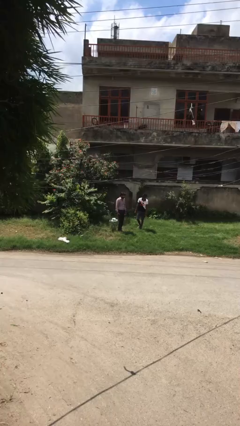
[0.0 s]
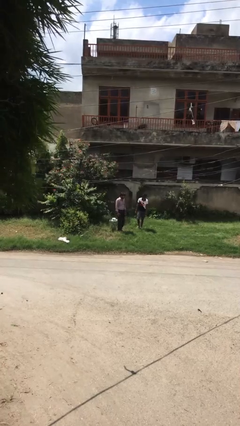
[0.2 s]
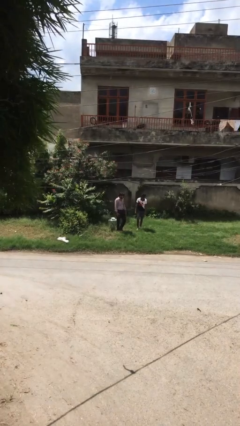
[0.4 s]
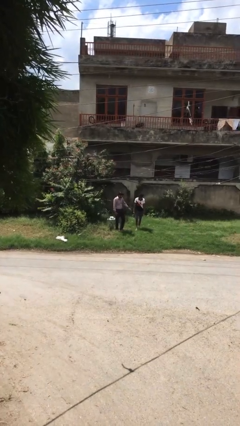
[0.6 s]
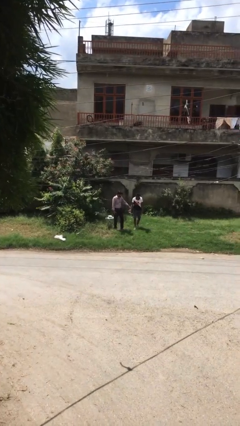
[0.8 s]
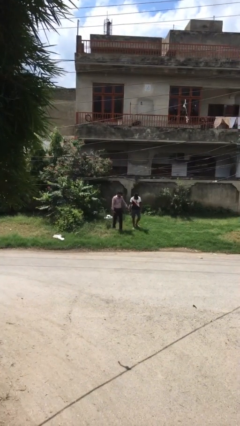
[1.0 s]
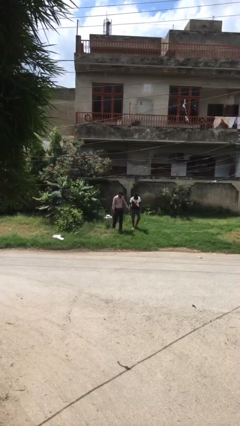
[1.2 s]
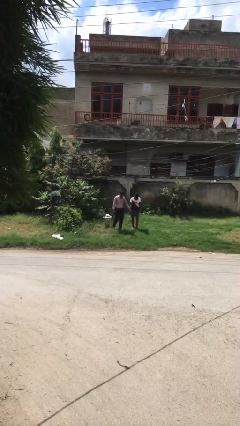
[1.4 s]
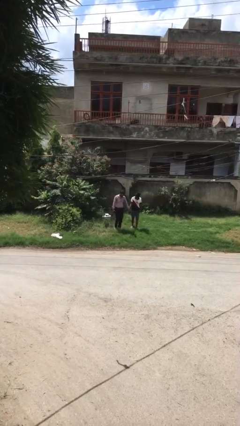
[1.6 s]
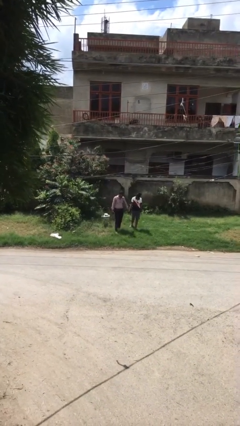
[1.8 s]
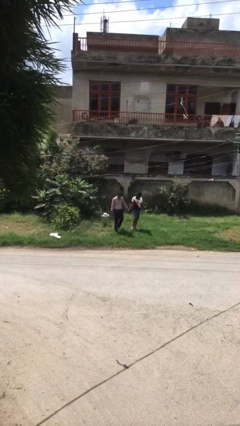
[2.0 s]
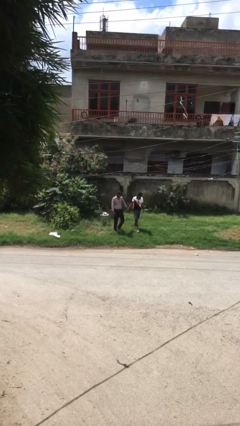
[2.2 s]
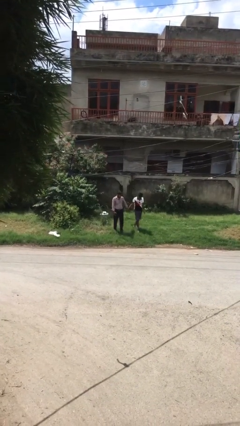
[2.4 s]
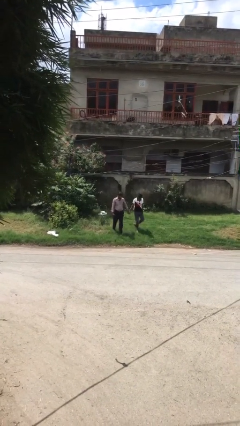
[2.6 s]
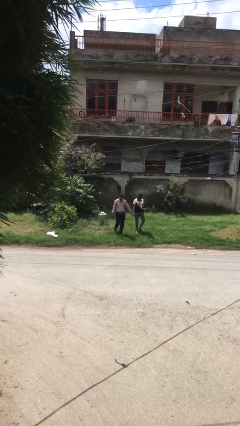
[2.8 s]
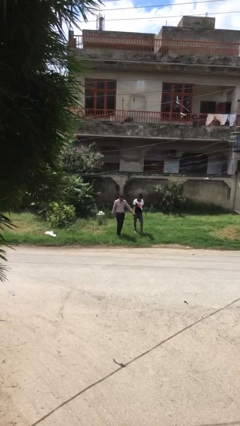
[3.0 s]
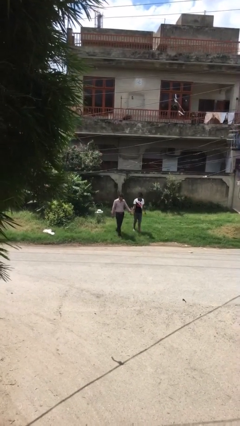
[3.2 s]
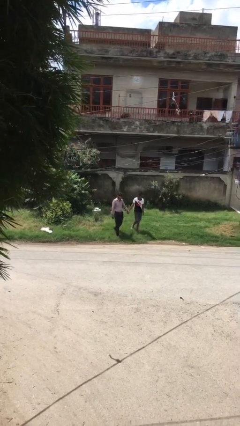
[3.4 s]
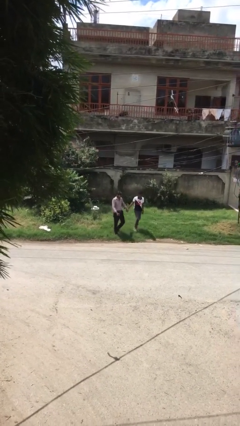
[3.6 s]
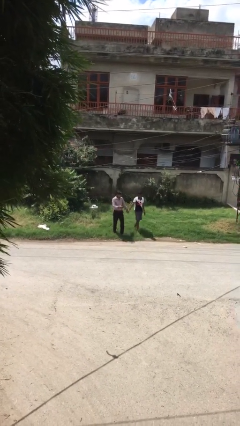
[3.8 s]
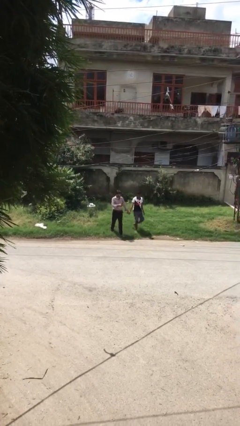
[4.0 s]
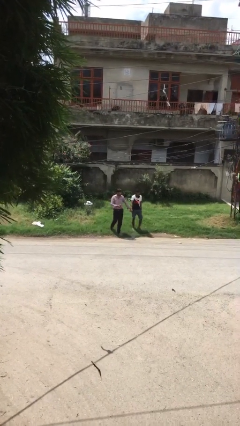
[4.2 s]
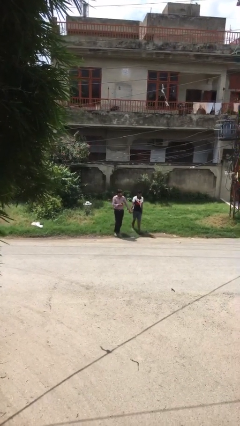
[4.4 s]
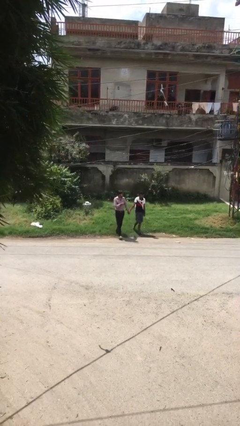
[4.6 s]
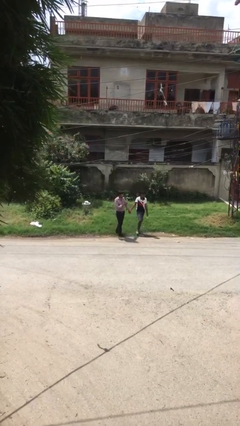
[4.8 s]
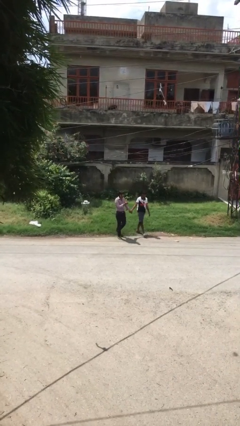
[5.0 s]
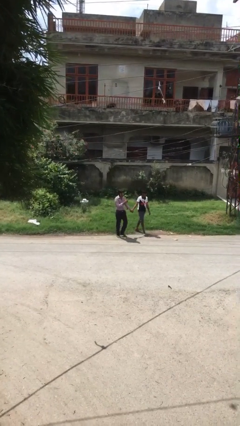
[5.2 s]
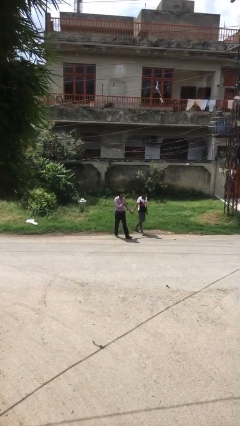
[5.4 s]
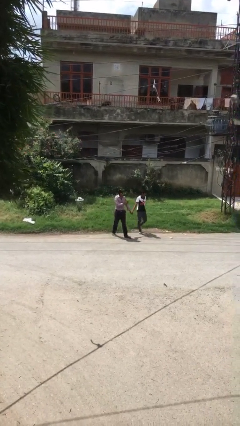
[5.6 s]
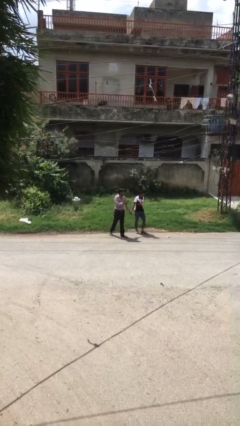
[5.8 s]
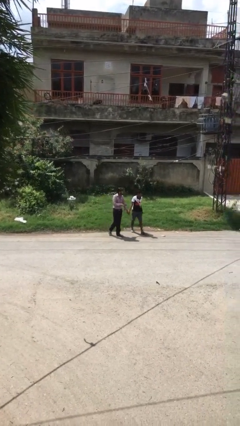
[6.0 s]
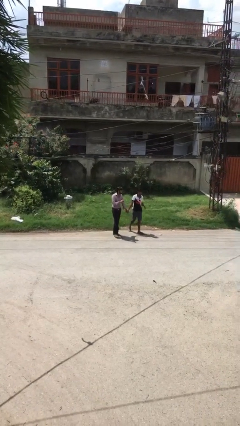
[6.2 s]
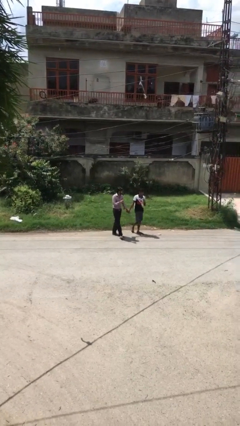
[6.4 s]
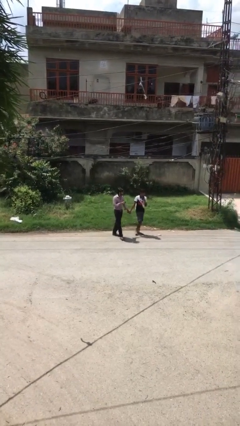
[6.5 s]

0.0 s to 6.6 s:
person holds hand

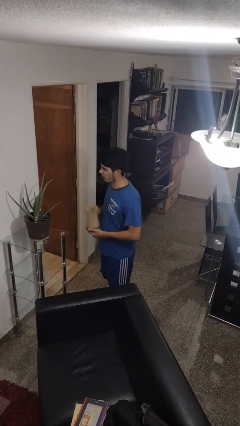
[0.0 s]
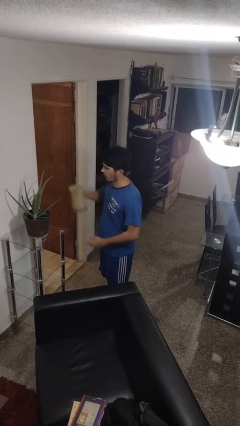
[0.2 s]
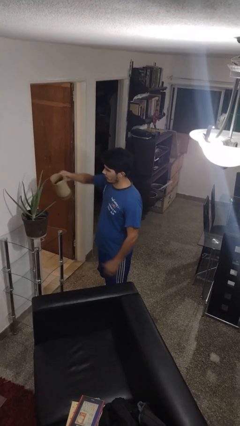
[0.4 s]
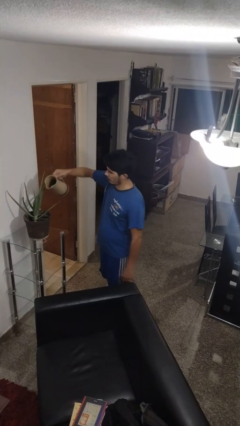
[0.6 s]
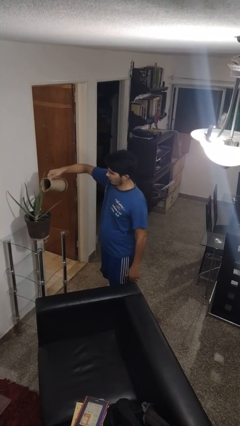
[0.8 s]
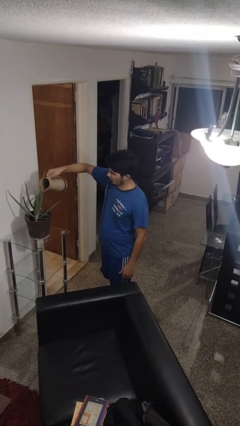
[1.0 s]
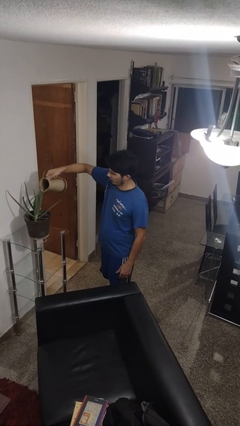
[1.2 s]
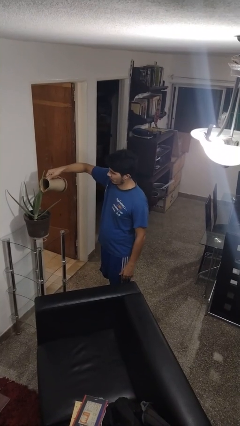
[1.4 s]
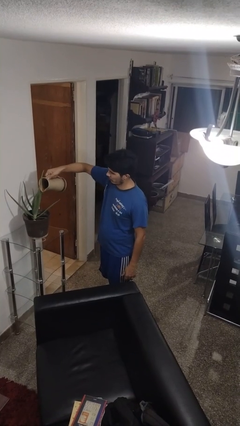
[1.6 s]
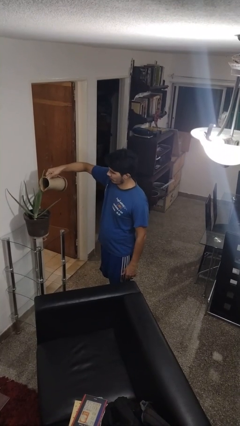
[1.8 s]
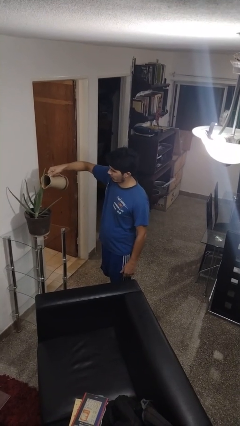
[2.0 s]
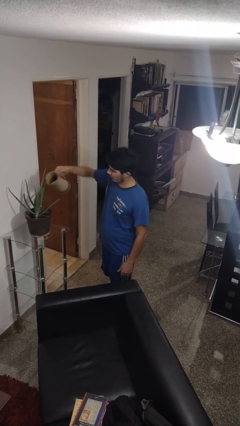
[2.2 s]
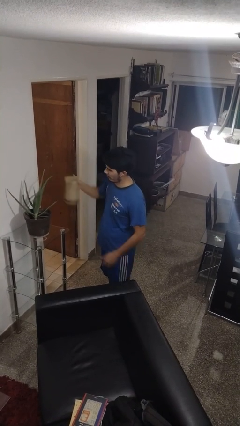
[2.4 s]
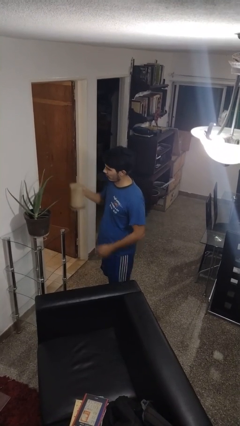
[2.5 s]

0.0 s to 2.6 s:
person waters houseplant

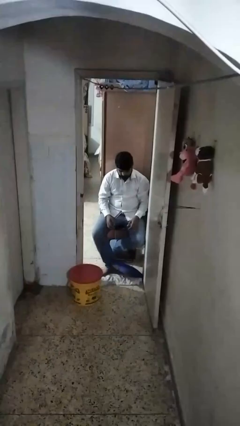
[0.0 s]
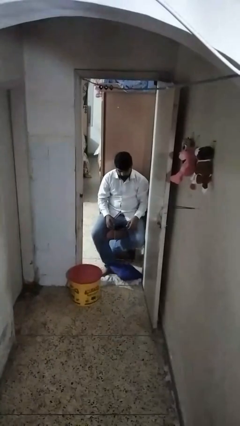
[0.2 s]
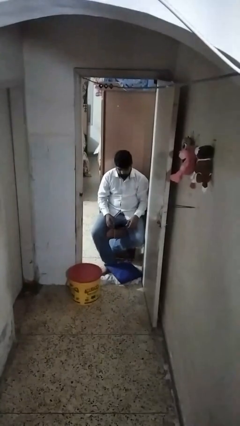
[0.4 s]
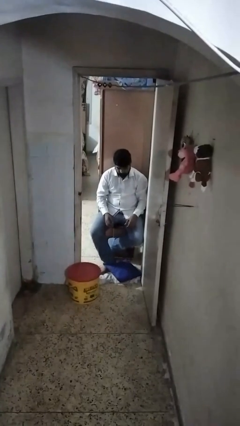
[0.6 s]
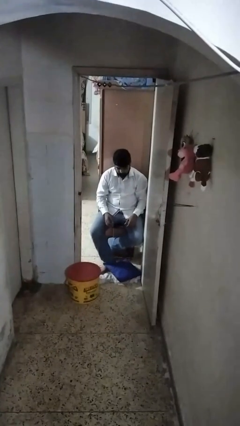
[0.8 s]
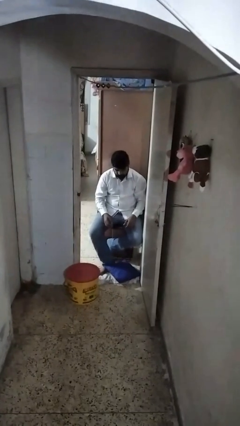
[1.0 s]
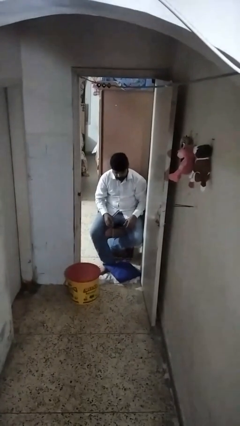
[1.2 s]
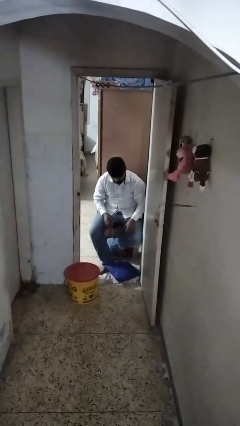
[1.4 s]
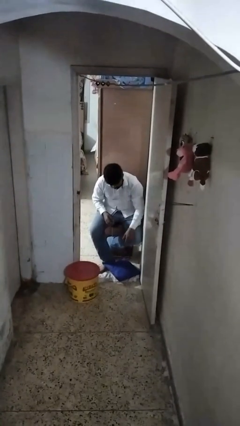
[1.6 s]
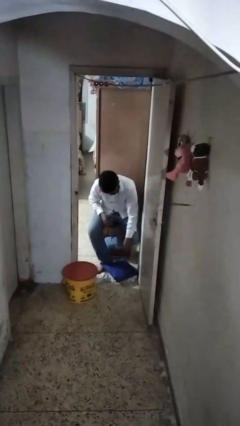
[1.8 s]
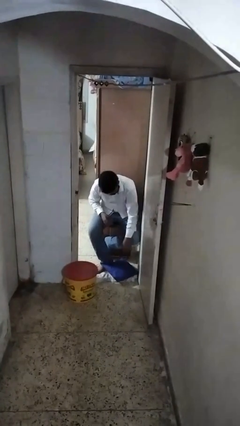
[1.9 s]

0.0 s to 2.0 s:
person drops object

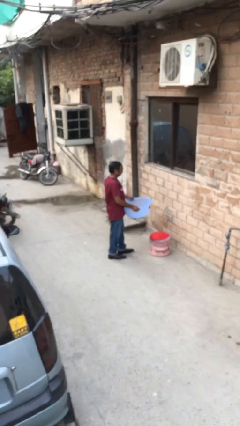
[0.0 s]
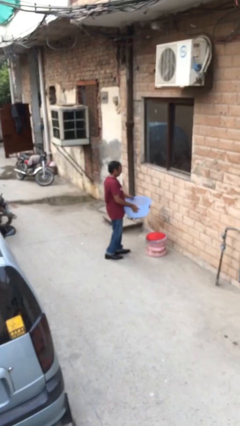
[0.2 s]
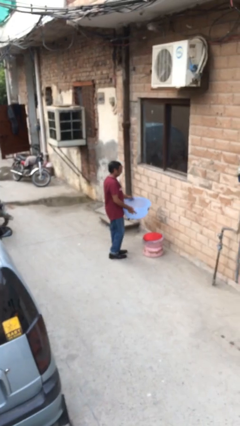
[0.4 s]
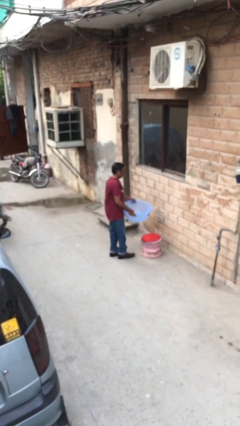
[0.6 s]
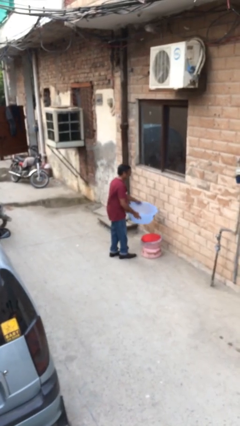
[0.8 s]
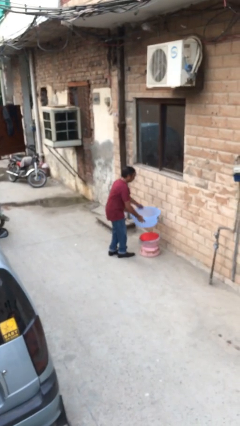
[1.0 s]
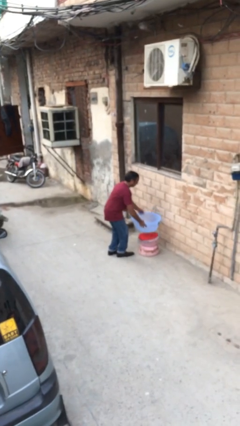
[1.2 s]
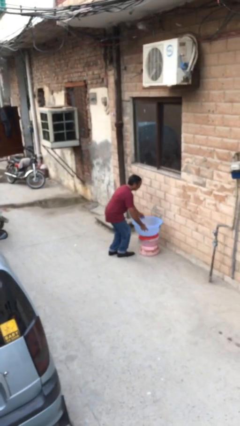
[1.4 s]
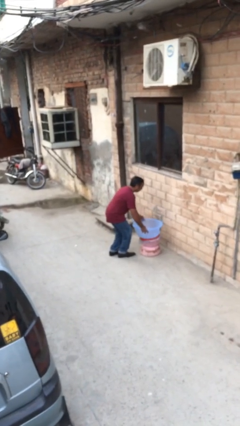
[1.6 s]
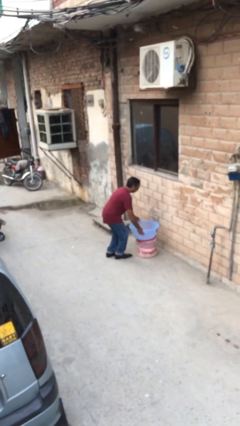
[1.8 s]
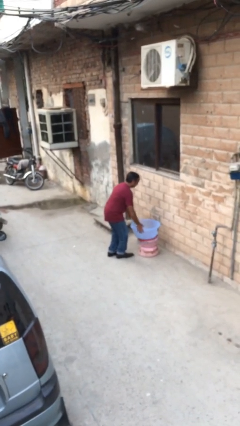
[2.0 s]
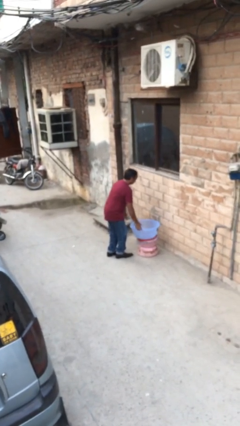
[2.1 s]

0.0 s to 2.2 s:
person puts down object on table

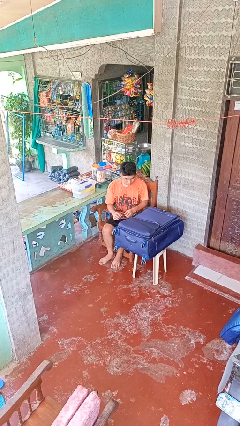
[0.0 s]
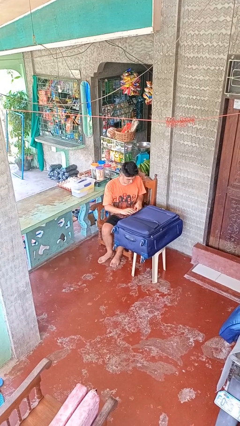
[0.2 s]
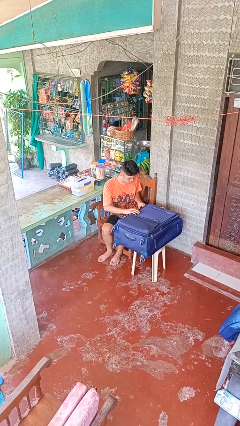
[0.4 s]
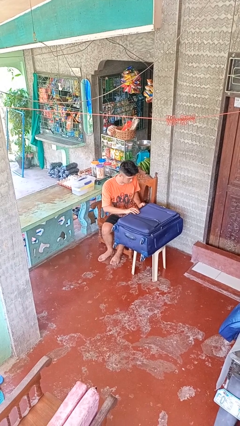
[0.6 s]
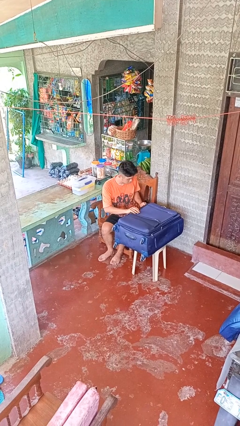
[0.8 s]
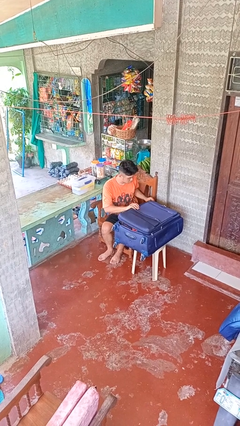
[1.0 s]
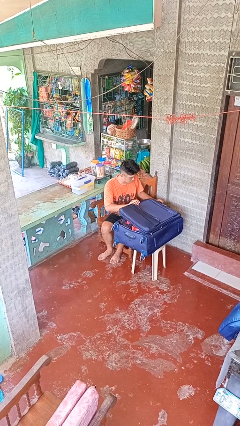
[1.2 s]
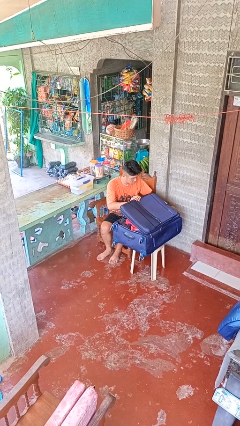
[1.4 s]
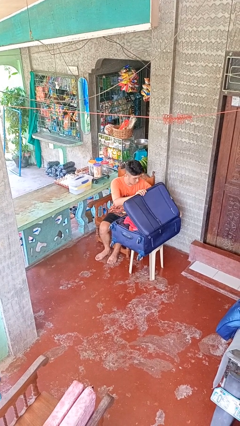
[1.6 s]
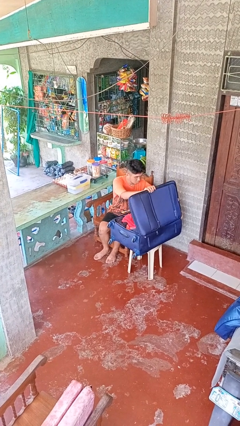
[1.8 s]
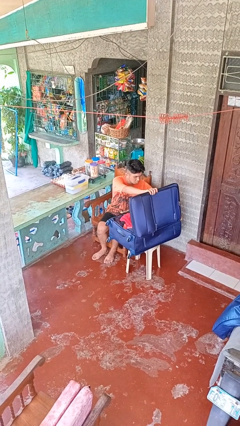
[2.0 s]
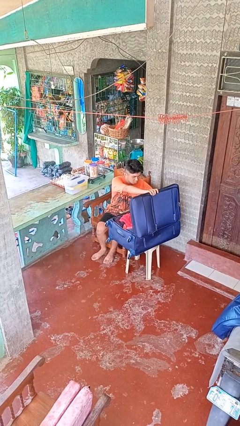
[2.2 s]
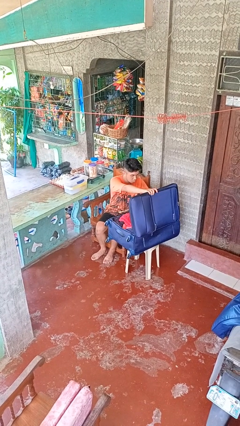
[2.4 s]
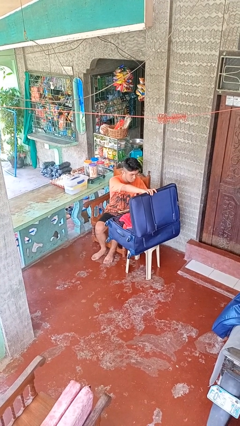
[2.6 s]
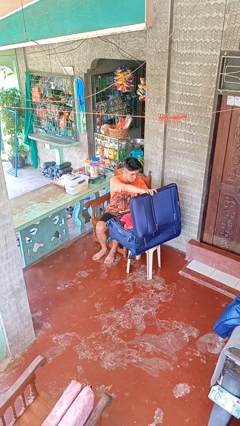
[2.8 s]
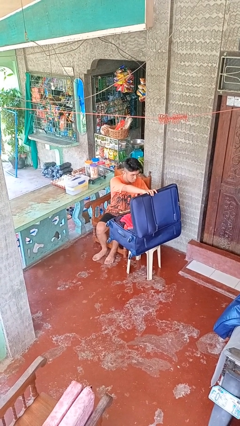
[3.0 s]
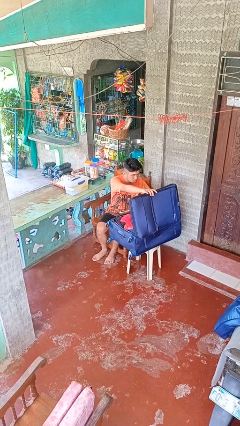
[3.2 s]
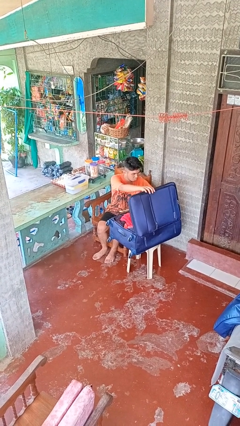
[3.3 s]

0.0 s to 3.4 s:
person opens suitcase

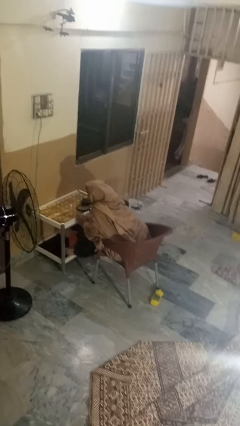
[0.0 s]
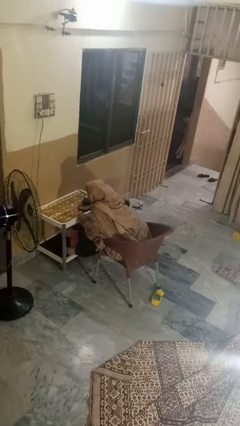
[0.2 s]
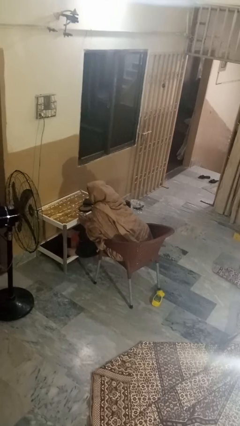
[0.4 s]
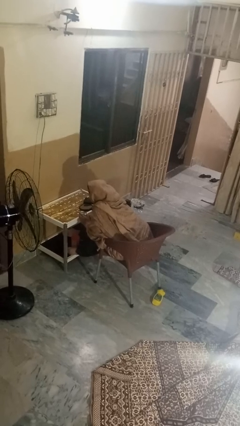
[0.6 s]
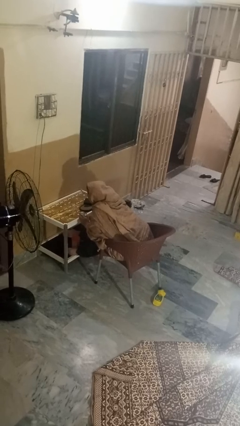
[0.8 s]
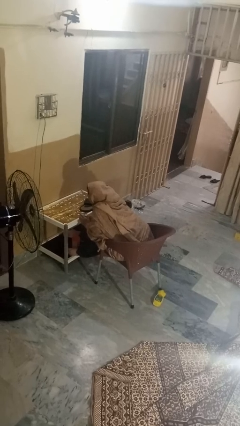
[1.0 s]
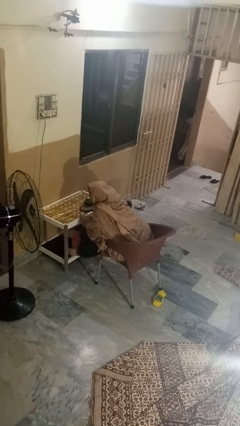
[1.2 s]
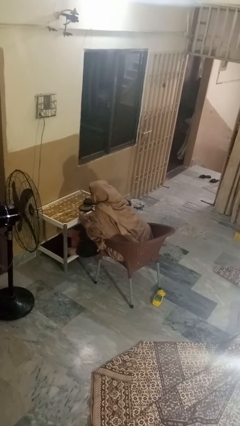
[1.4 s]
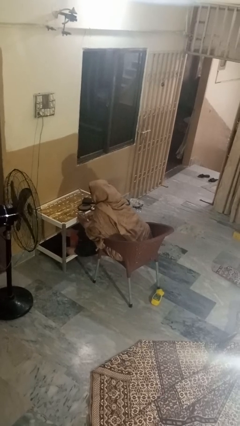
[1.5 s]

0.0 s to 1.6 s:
person extinguishes candle
